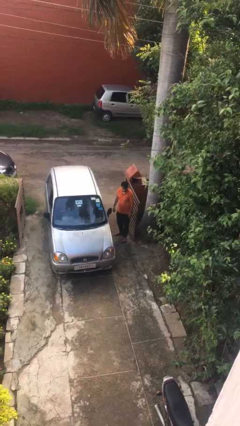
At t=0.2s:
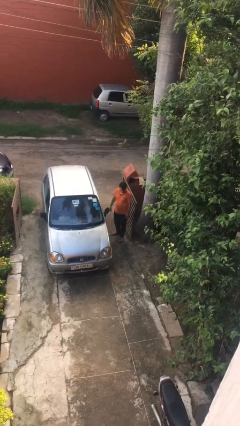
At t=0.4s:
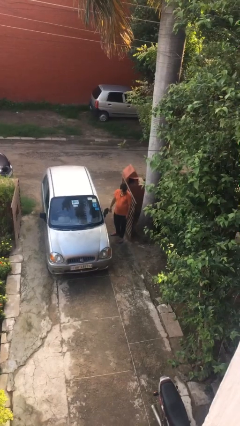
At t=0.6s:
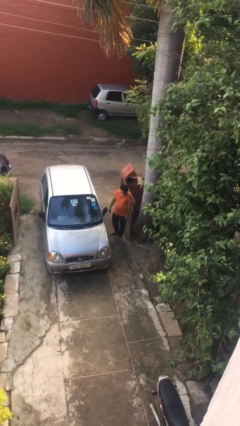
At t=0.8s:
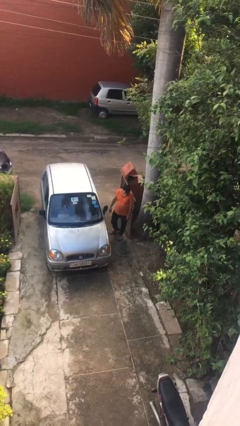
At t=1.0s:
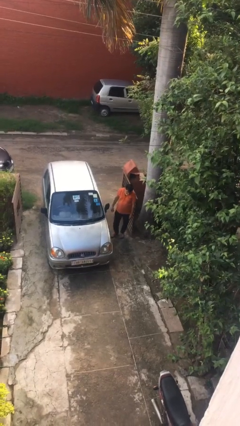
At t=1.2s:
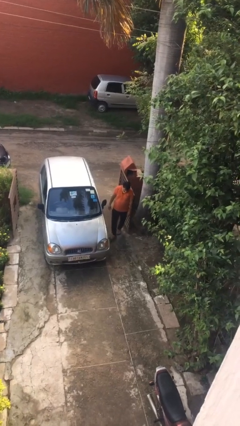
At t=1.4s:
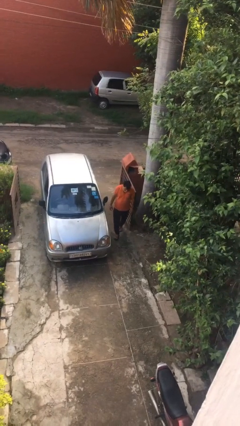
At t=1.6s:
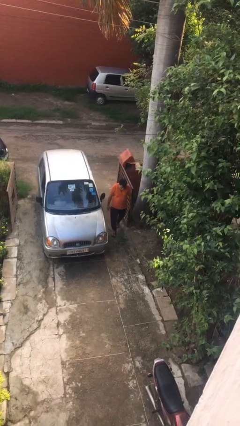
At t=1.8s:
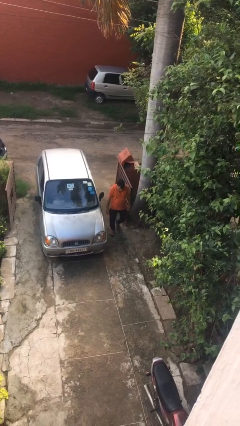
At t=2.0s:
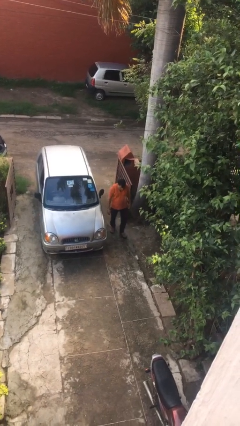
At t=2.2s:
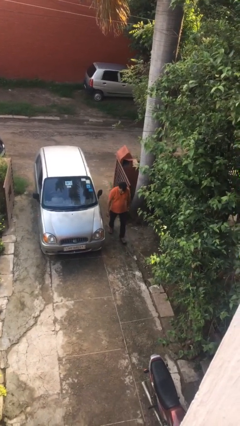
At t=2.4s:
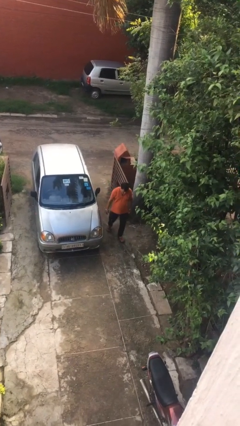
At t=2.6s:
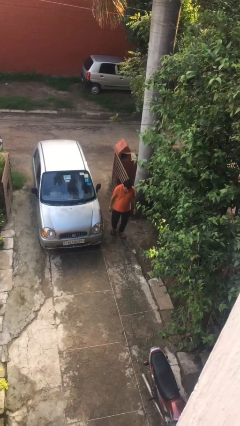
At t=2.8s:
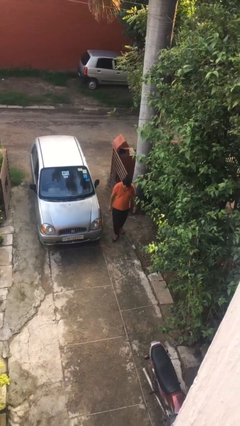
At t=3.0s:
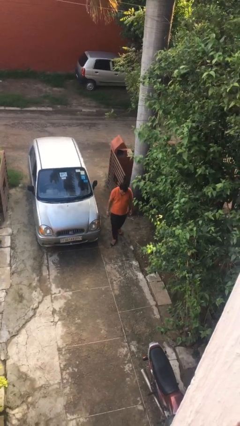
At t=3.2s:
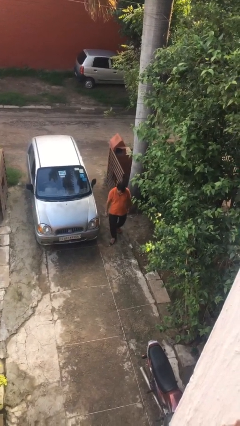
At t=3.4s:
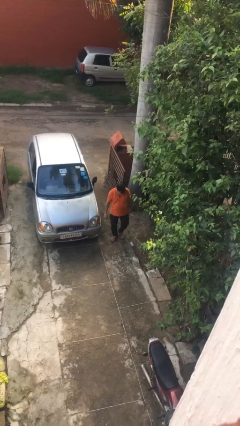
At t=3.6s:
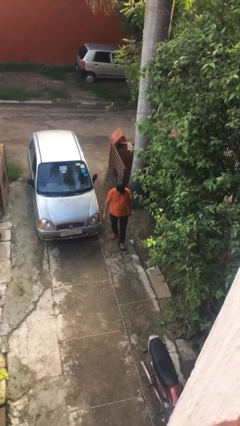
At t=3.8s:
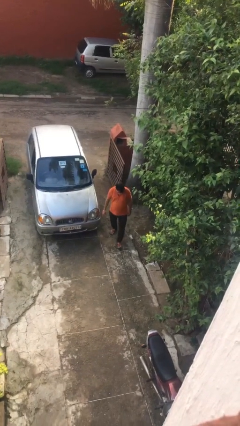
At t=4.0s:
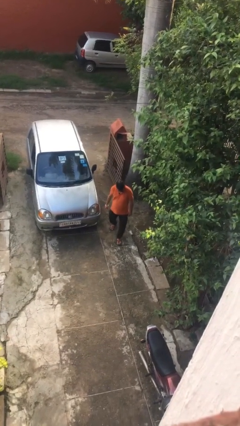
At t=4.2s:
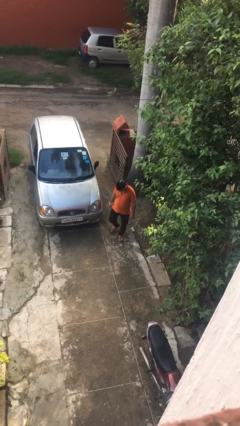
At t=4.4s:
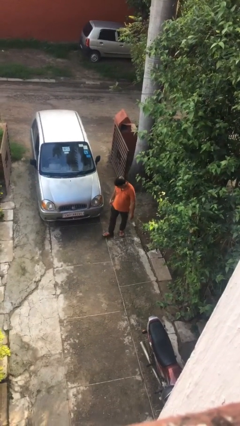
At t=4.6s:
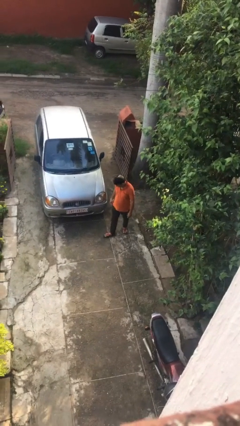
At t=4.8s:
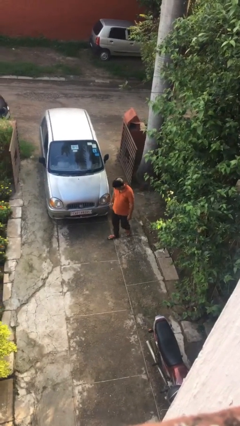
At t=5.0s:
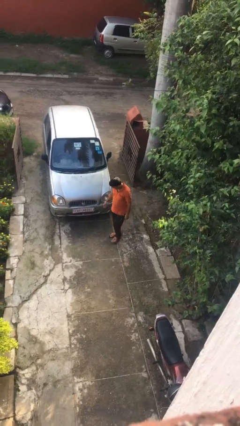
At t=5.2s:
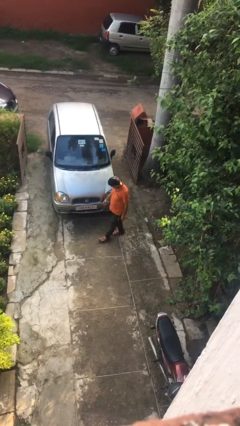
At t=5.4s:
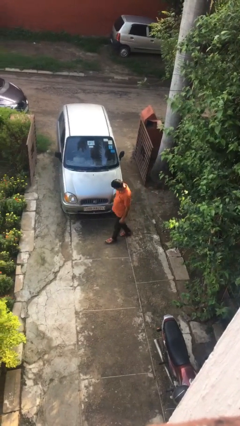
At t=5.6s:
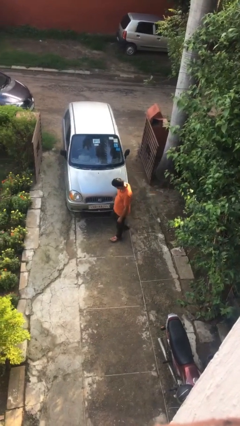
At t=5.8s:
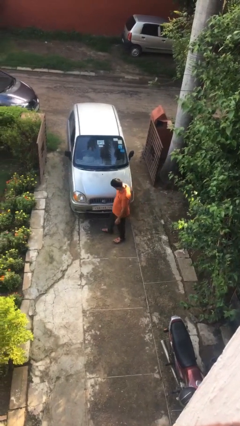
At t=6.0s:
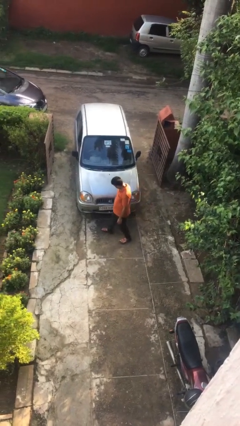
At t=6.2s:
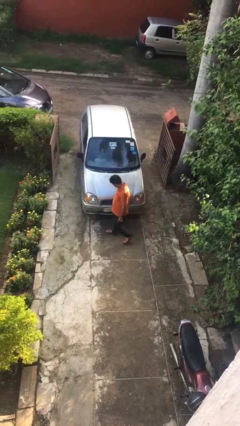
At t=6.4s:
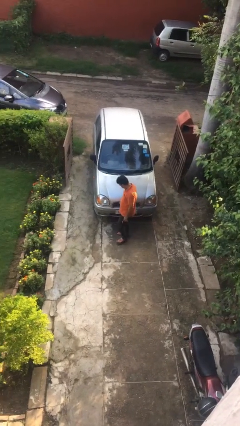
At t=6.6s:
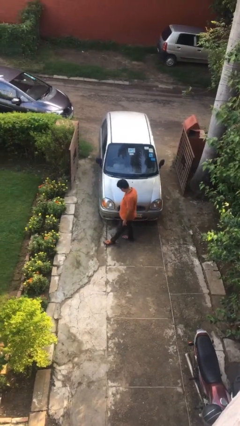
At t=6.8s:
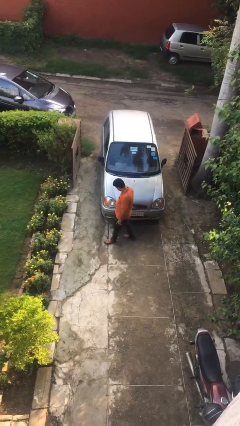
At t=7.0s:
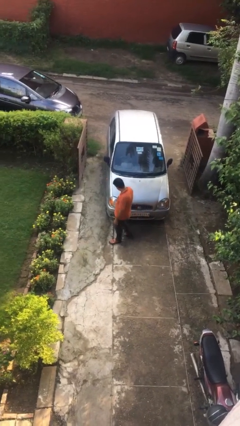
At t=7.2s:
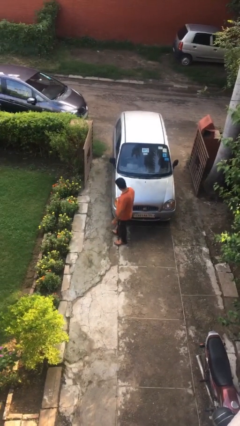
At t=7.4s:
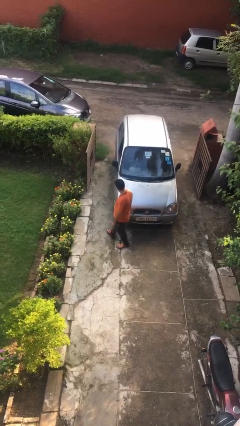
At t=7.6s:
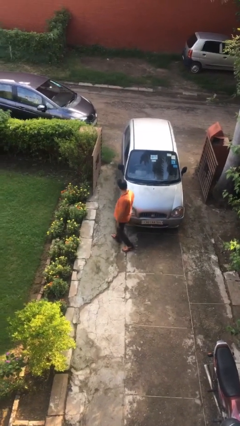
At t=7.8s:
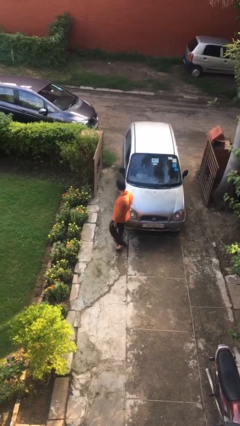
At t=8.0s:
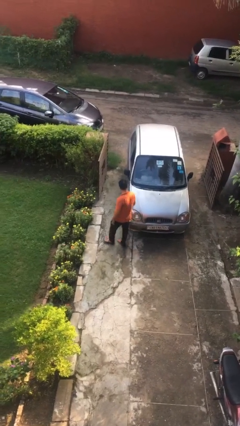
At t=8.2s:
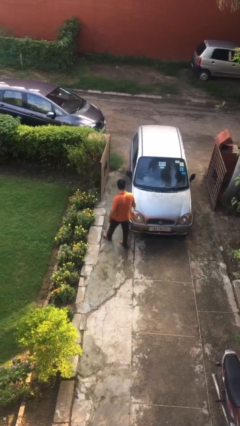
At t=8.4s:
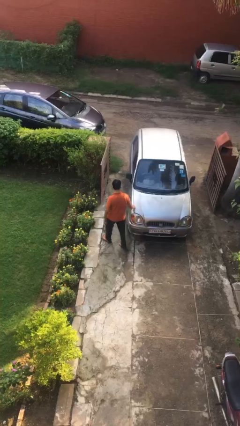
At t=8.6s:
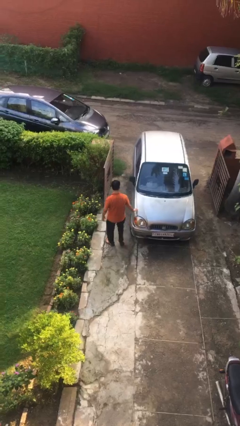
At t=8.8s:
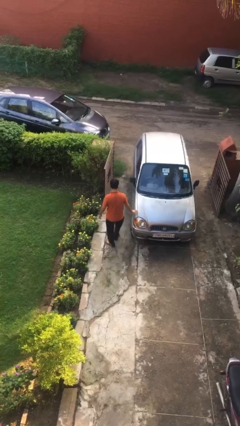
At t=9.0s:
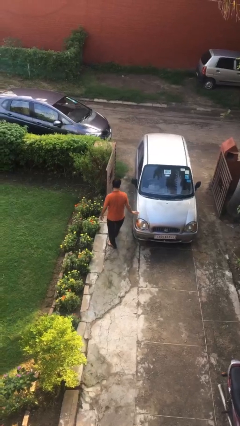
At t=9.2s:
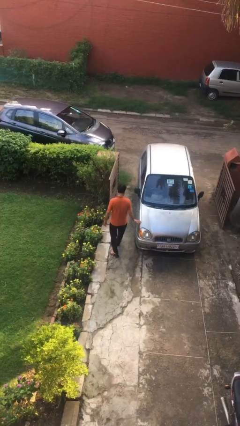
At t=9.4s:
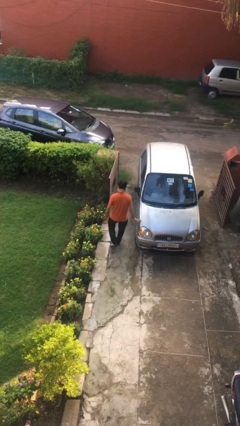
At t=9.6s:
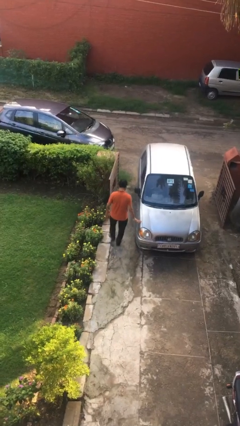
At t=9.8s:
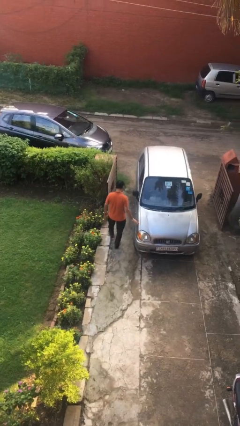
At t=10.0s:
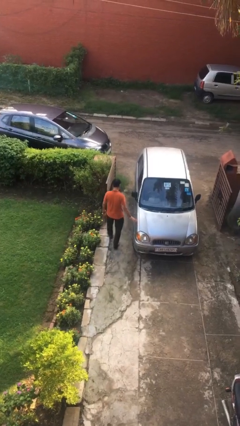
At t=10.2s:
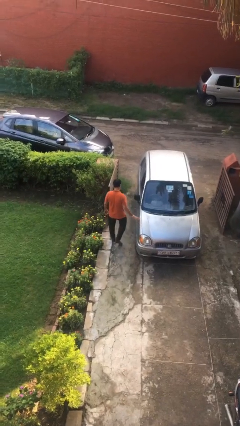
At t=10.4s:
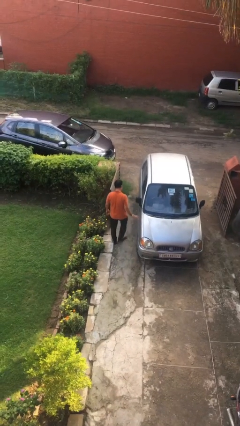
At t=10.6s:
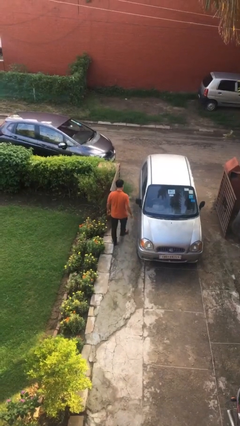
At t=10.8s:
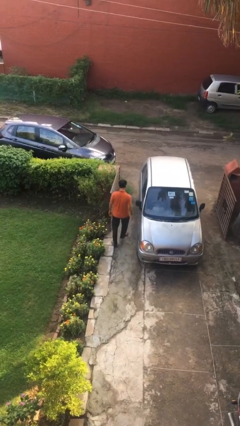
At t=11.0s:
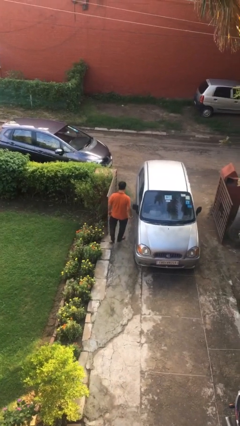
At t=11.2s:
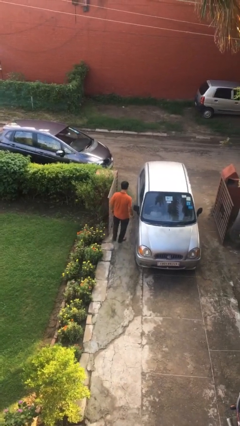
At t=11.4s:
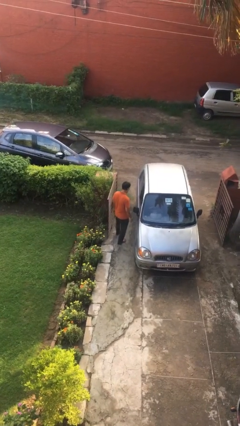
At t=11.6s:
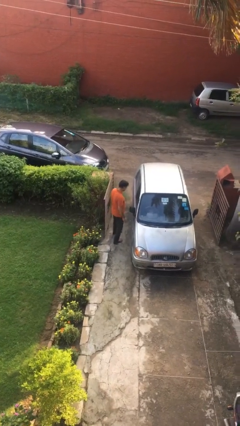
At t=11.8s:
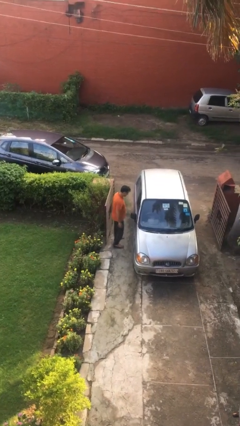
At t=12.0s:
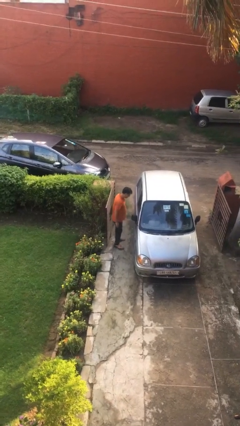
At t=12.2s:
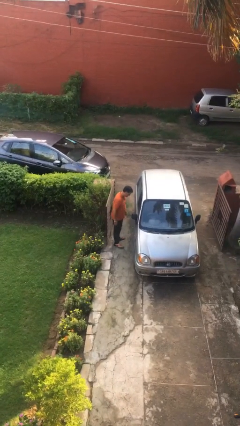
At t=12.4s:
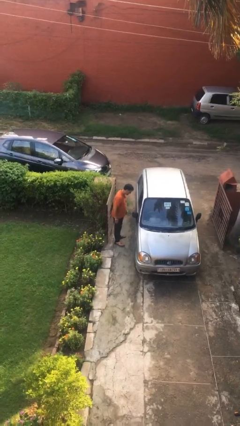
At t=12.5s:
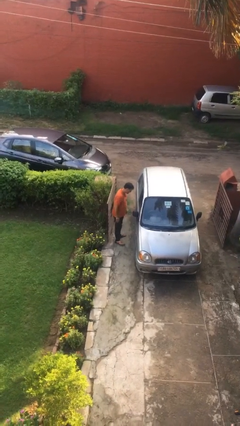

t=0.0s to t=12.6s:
person walks around car

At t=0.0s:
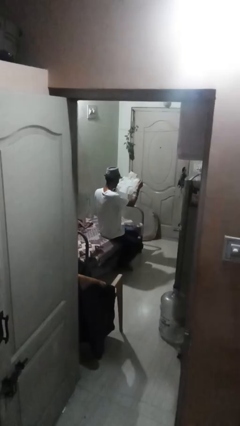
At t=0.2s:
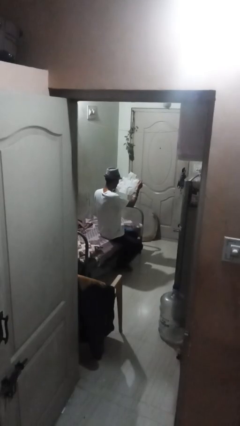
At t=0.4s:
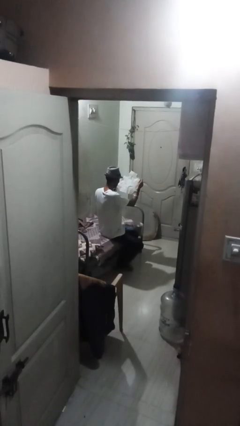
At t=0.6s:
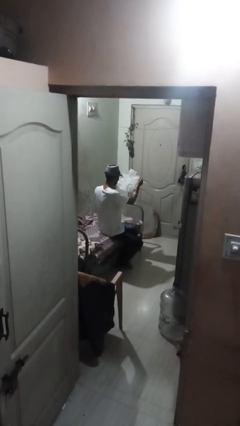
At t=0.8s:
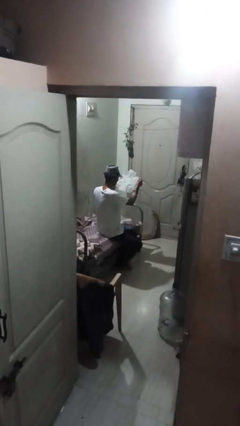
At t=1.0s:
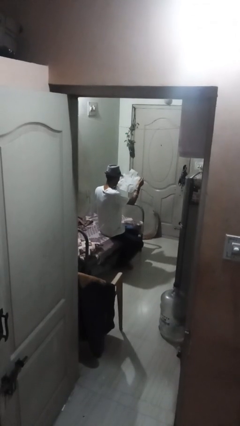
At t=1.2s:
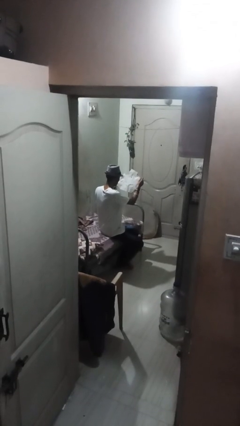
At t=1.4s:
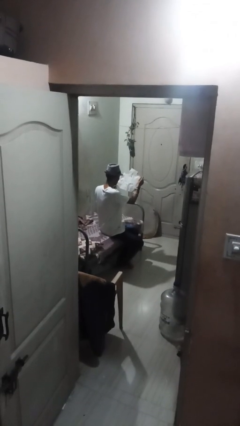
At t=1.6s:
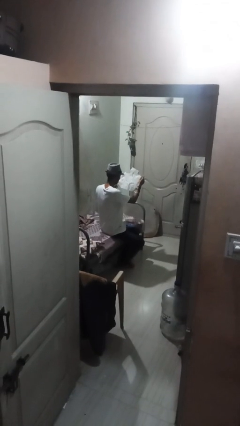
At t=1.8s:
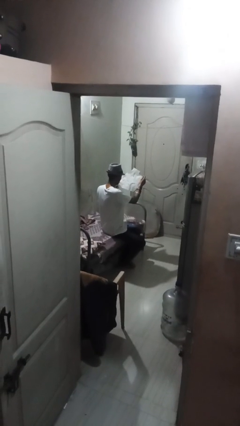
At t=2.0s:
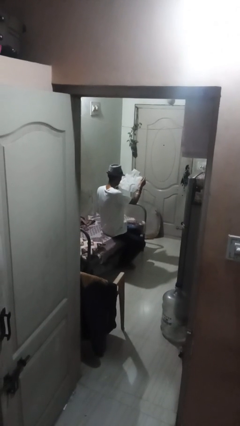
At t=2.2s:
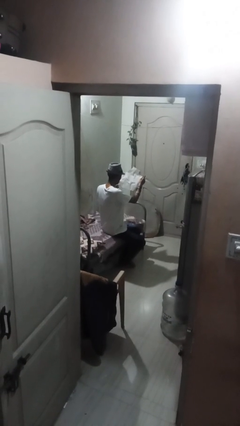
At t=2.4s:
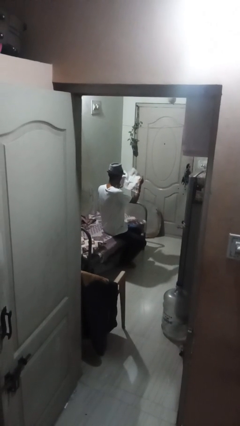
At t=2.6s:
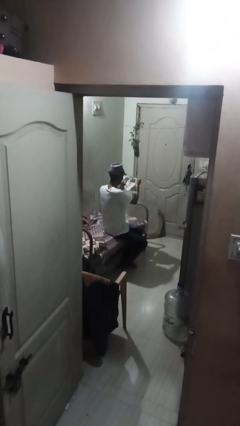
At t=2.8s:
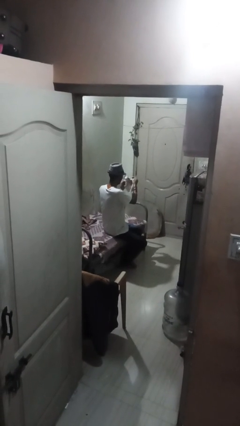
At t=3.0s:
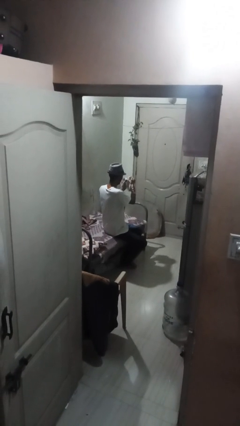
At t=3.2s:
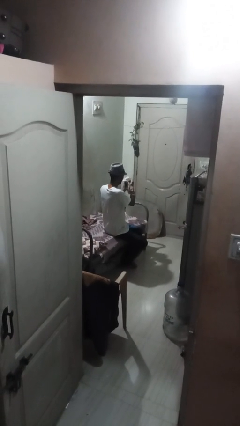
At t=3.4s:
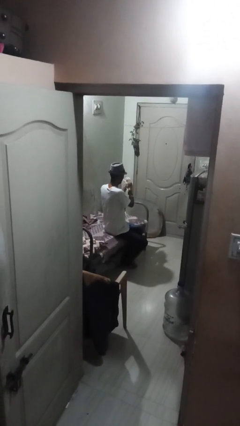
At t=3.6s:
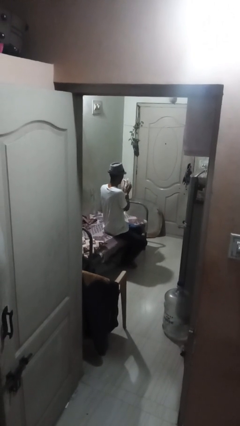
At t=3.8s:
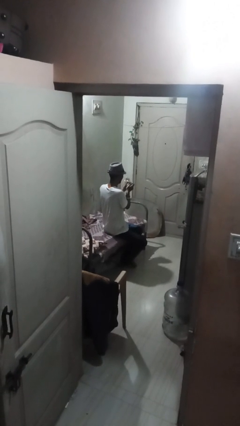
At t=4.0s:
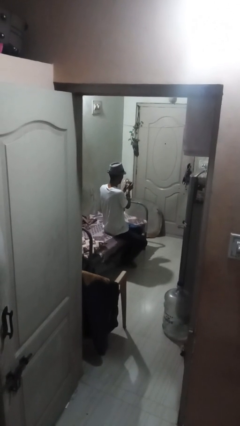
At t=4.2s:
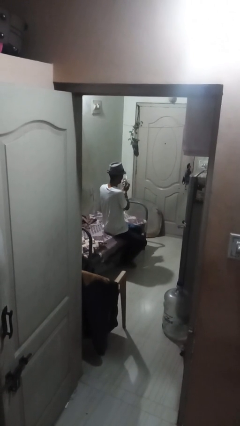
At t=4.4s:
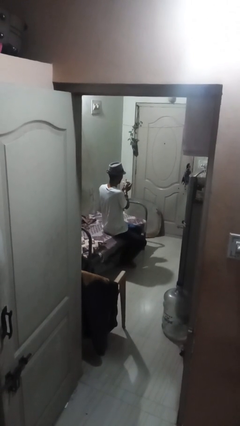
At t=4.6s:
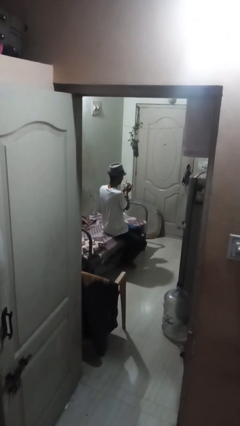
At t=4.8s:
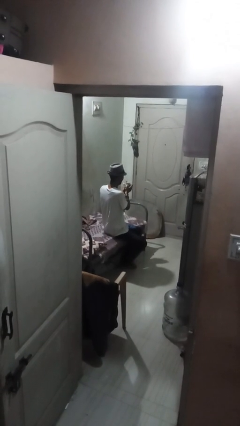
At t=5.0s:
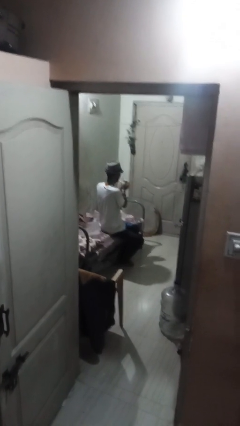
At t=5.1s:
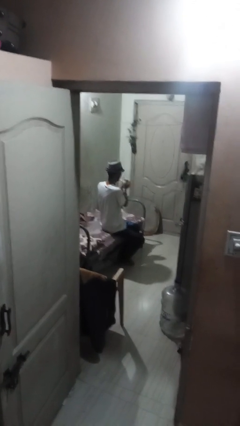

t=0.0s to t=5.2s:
person crumples paper

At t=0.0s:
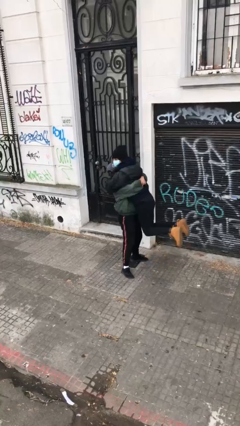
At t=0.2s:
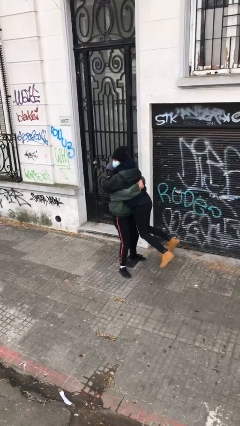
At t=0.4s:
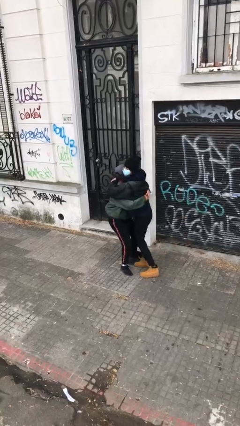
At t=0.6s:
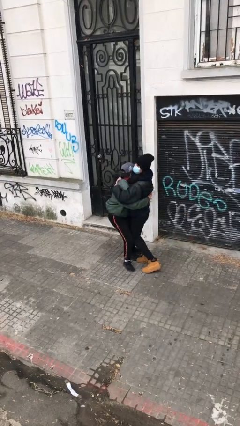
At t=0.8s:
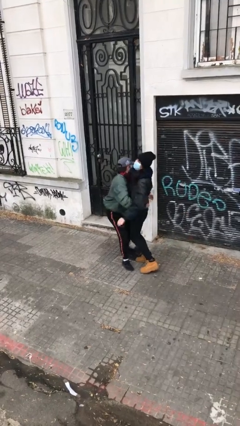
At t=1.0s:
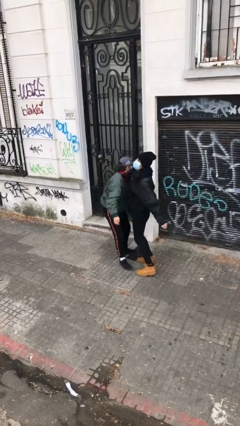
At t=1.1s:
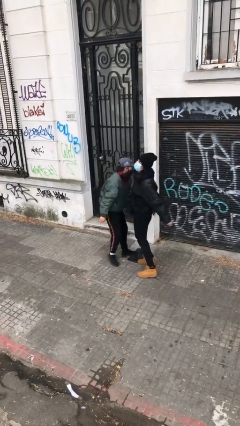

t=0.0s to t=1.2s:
person puts down person
